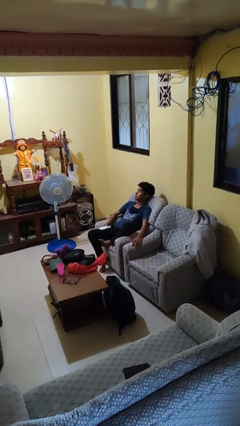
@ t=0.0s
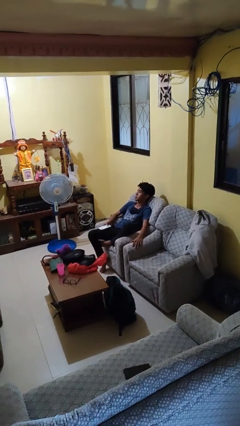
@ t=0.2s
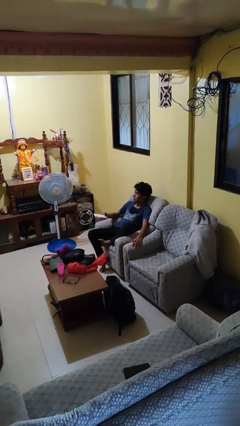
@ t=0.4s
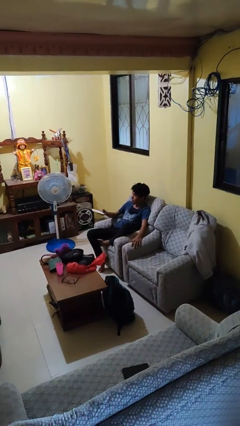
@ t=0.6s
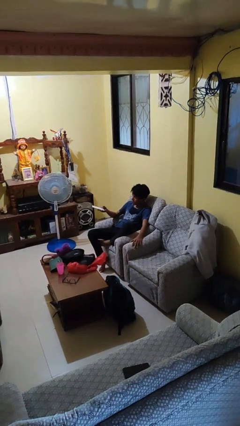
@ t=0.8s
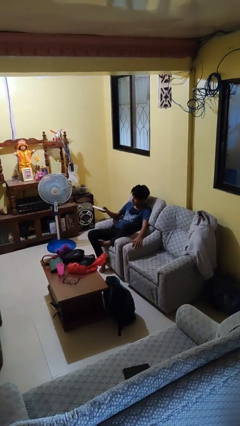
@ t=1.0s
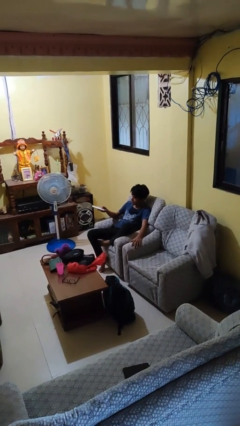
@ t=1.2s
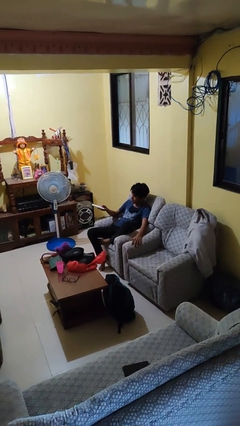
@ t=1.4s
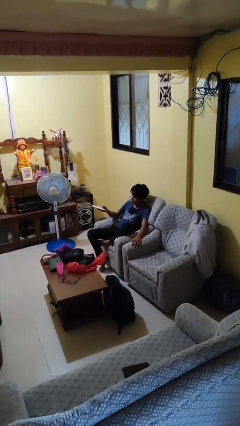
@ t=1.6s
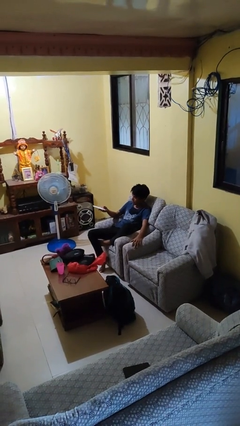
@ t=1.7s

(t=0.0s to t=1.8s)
person uses television remote

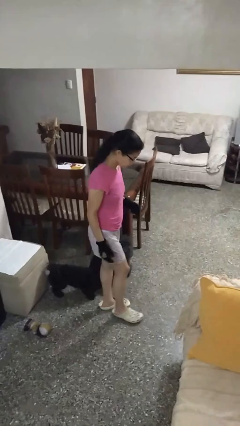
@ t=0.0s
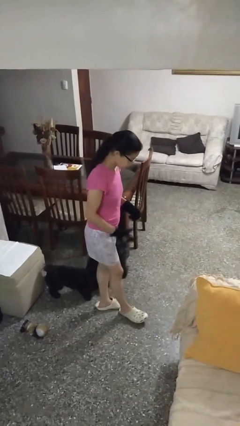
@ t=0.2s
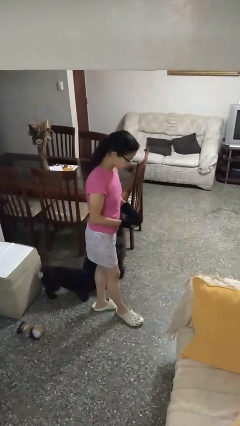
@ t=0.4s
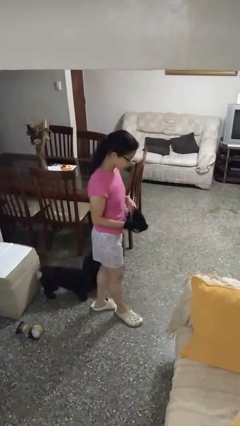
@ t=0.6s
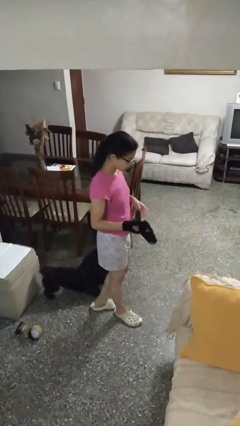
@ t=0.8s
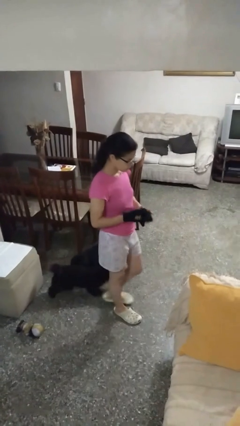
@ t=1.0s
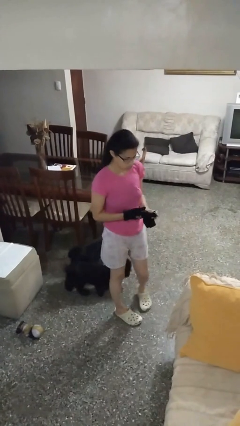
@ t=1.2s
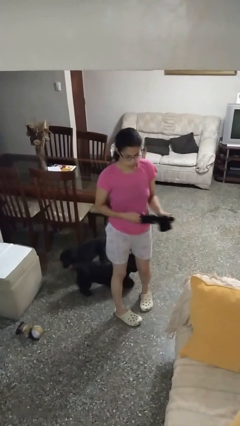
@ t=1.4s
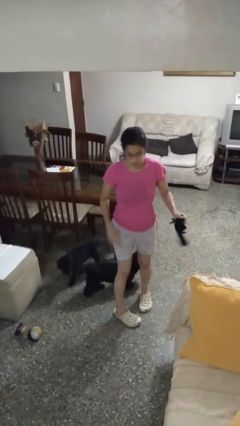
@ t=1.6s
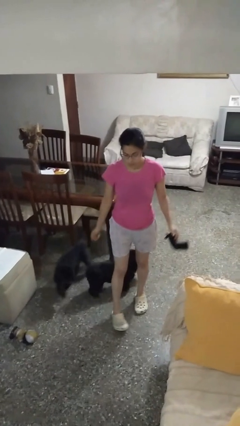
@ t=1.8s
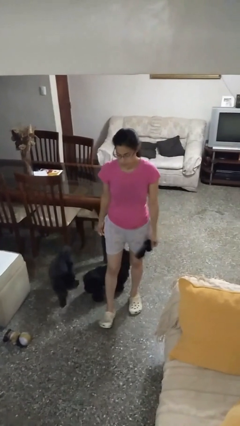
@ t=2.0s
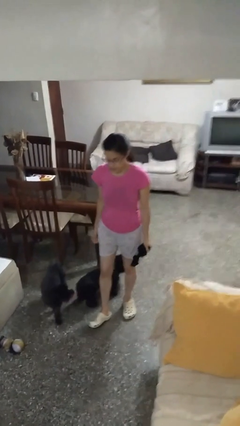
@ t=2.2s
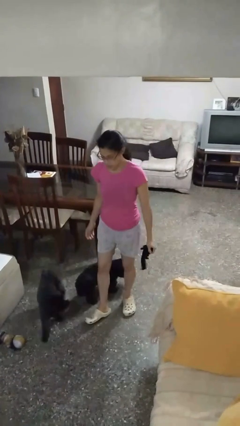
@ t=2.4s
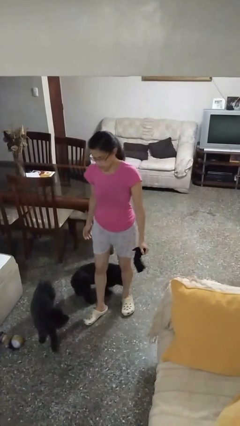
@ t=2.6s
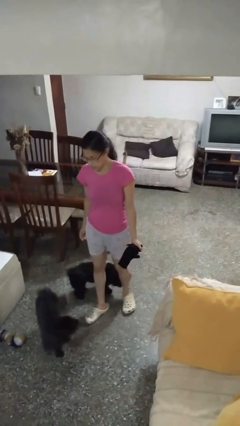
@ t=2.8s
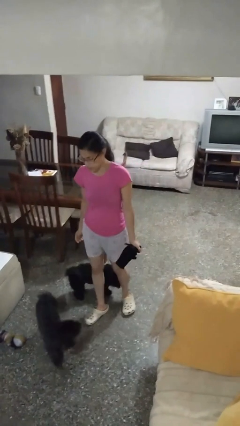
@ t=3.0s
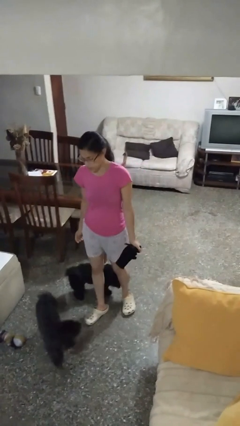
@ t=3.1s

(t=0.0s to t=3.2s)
person takes off gloves

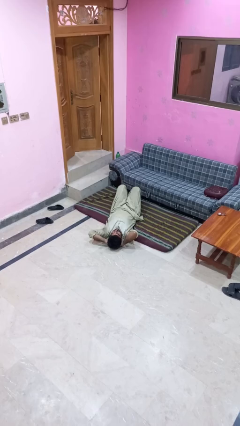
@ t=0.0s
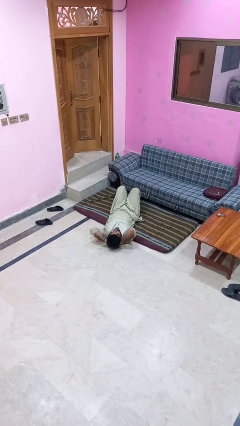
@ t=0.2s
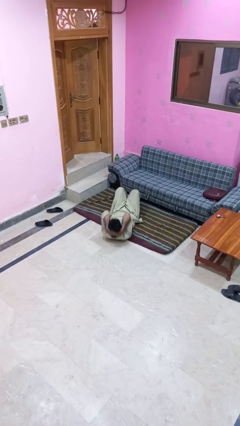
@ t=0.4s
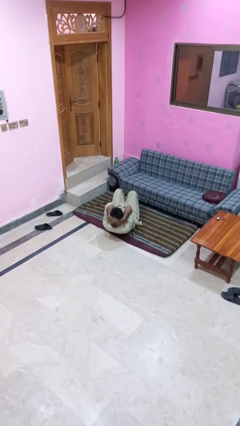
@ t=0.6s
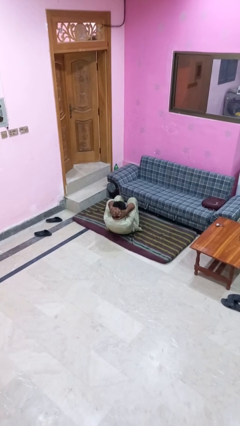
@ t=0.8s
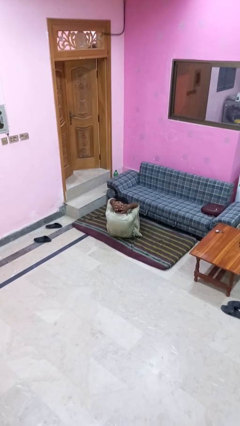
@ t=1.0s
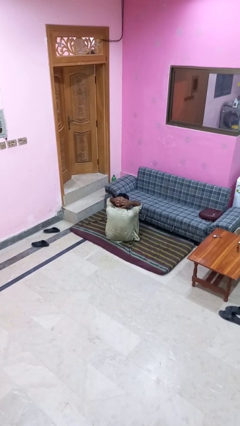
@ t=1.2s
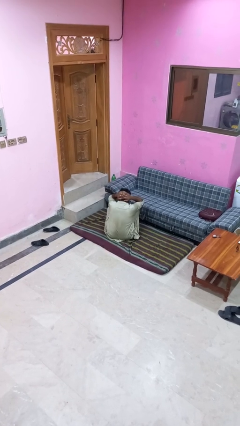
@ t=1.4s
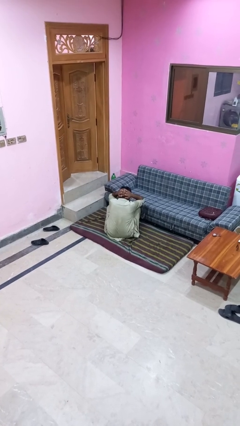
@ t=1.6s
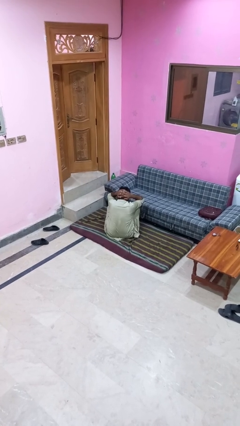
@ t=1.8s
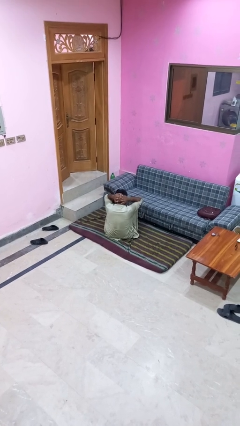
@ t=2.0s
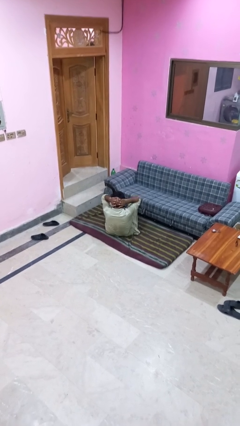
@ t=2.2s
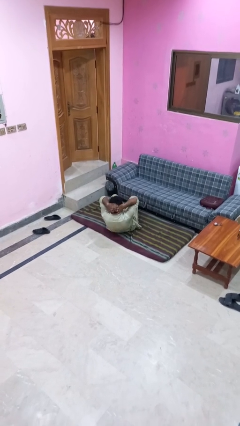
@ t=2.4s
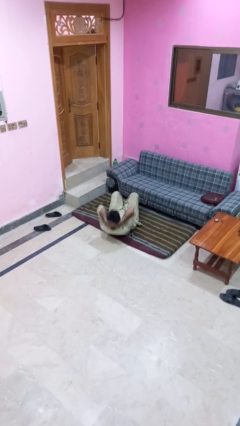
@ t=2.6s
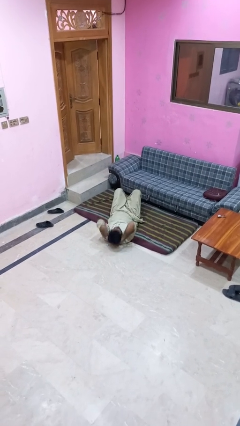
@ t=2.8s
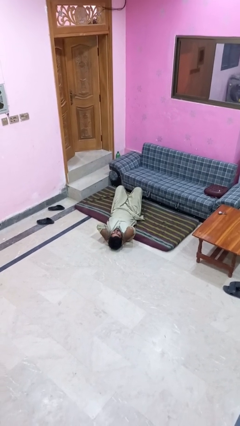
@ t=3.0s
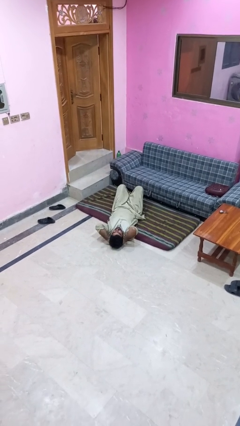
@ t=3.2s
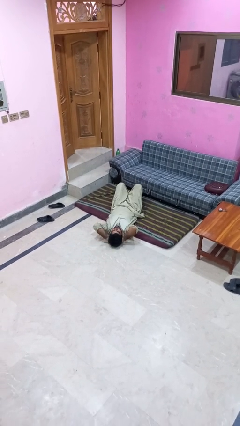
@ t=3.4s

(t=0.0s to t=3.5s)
person exercises with situp

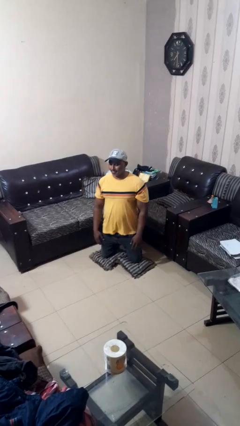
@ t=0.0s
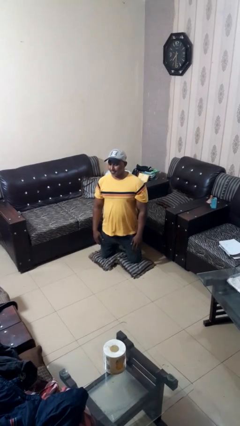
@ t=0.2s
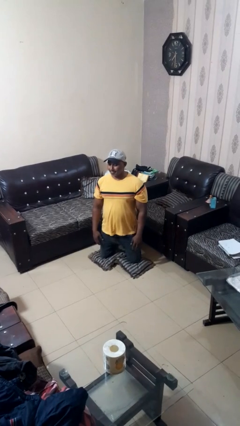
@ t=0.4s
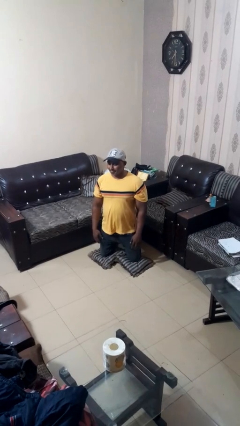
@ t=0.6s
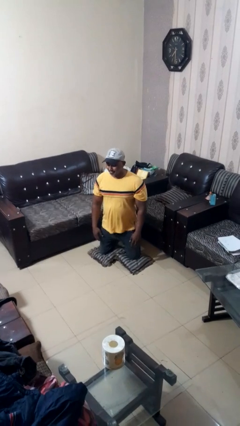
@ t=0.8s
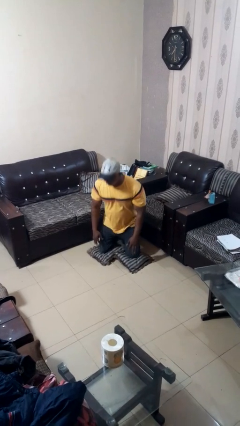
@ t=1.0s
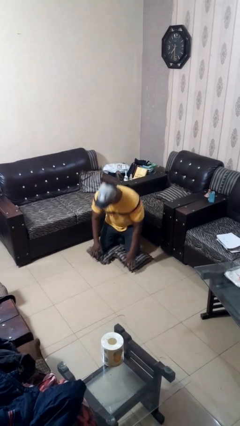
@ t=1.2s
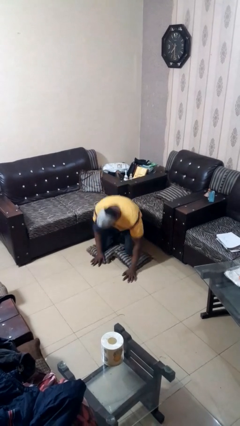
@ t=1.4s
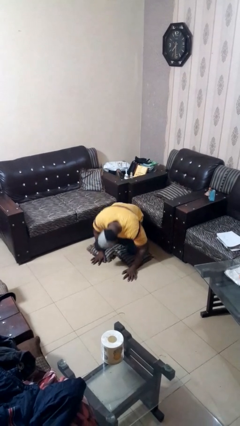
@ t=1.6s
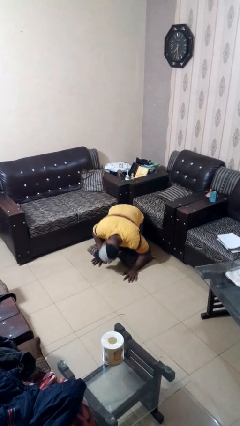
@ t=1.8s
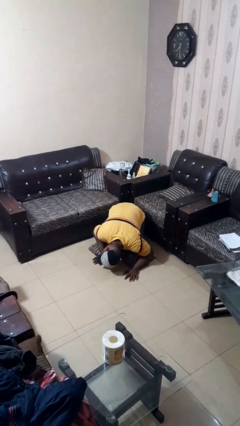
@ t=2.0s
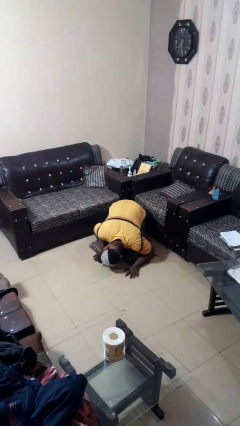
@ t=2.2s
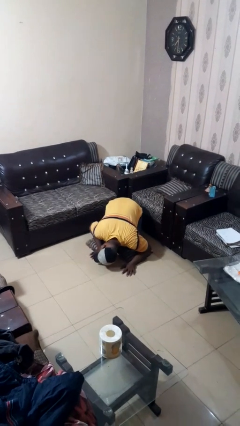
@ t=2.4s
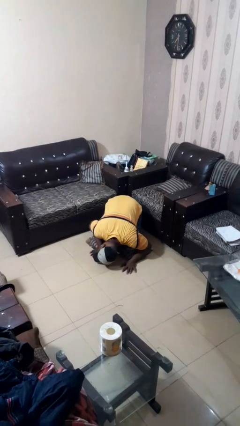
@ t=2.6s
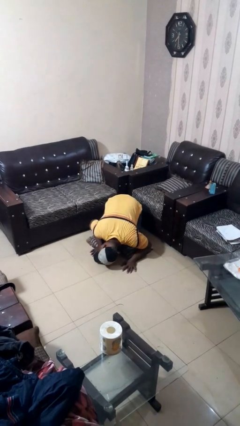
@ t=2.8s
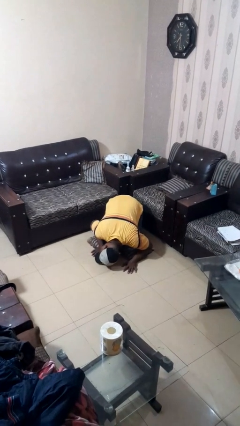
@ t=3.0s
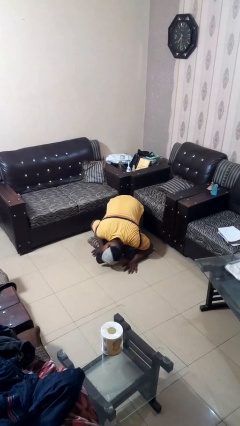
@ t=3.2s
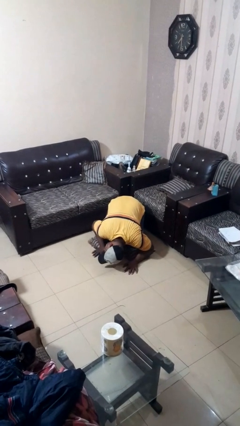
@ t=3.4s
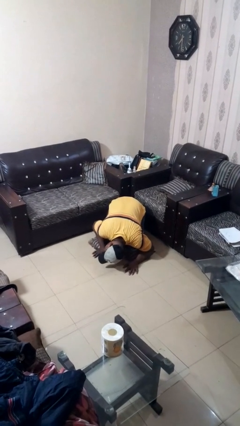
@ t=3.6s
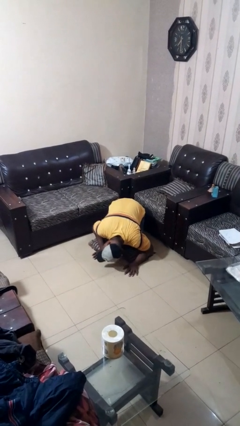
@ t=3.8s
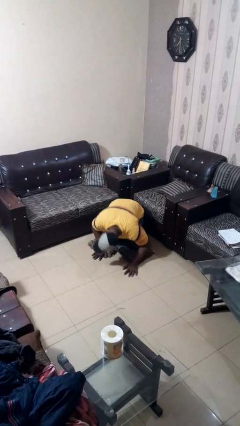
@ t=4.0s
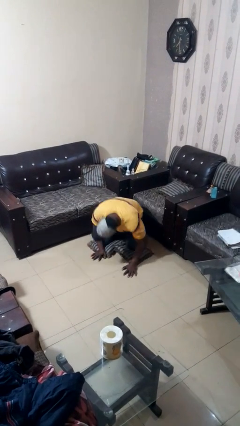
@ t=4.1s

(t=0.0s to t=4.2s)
person searches under couch

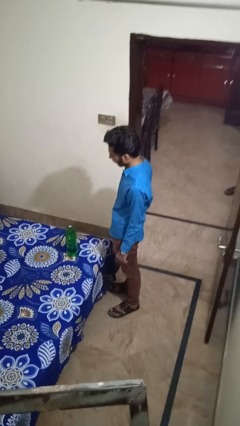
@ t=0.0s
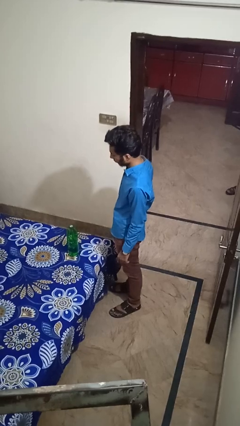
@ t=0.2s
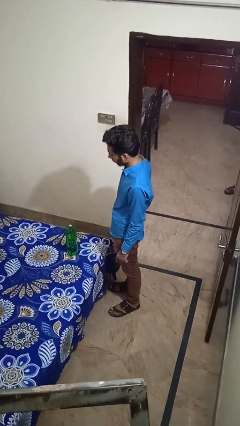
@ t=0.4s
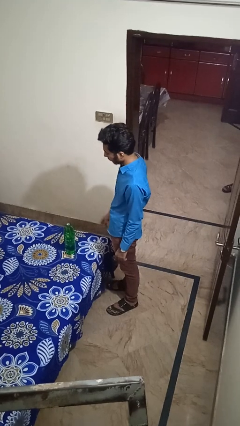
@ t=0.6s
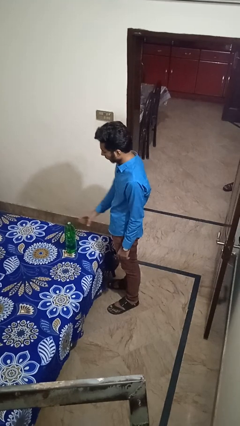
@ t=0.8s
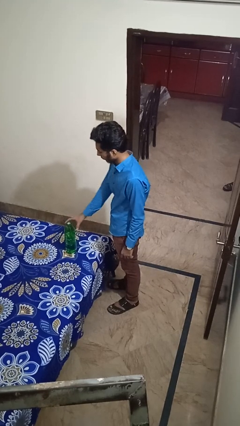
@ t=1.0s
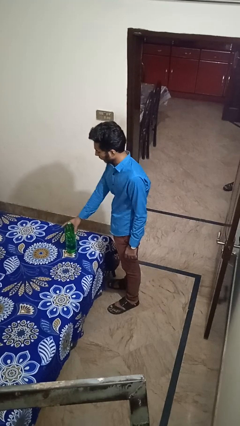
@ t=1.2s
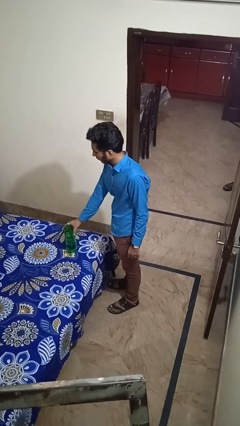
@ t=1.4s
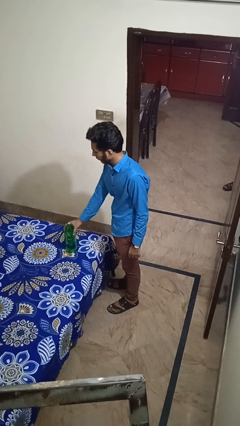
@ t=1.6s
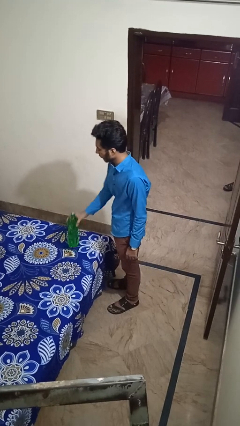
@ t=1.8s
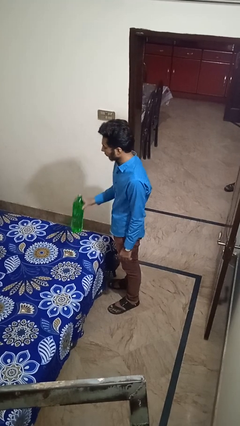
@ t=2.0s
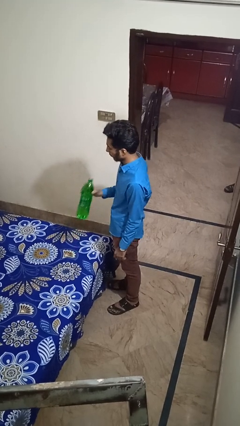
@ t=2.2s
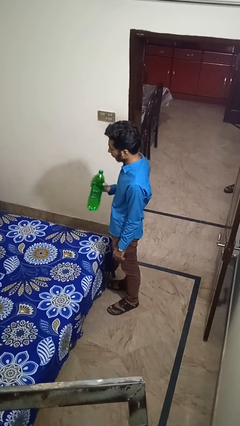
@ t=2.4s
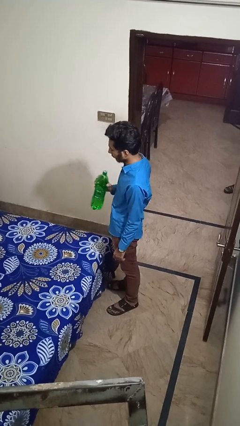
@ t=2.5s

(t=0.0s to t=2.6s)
person picks up object from bed

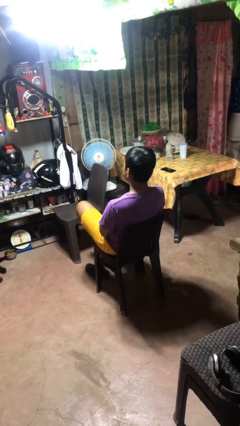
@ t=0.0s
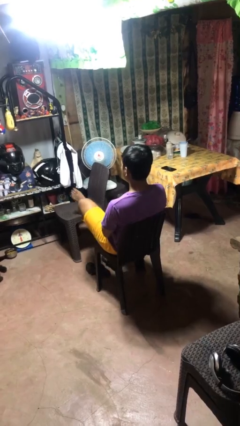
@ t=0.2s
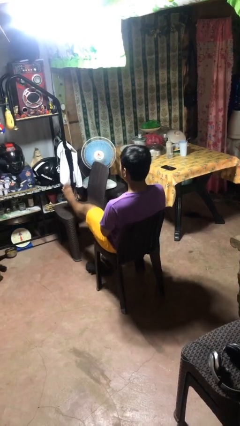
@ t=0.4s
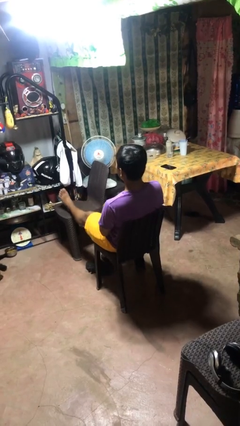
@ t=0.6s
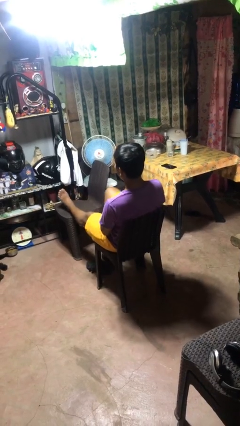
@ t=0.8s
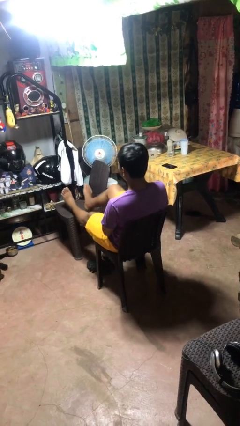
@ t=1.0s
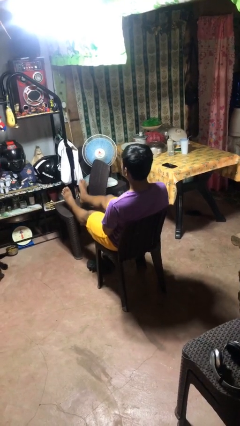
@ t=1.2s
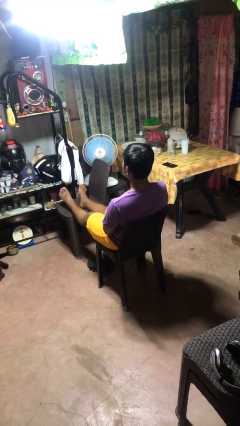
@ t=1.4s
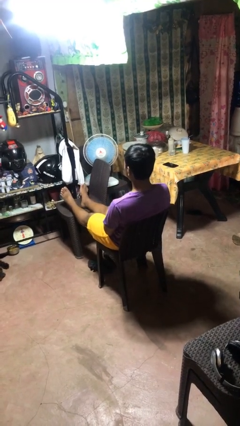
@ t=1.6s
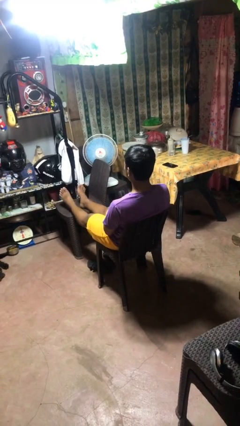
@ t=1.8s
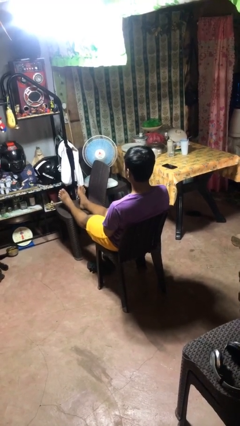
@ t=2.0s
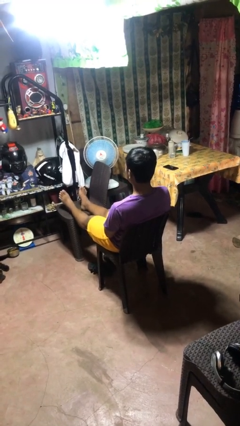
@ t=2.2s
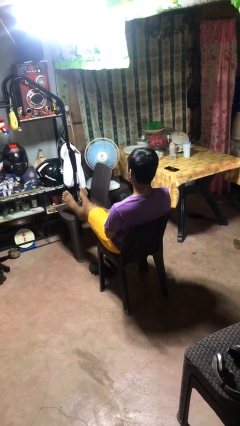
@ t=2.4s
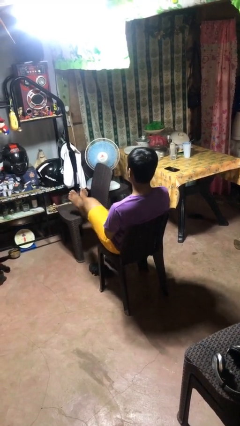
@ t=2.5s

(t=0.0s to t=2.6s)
person puts feet up
